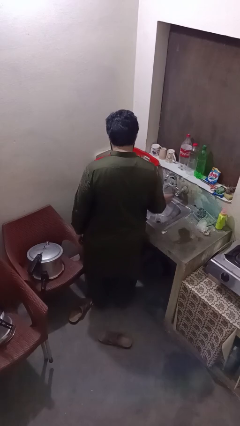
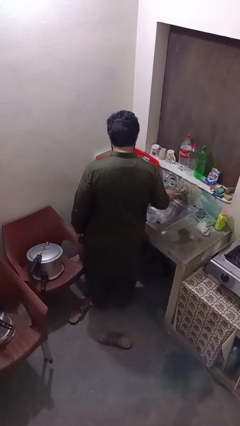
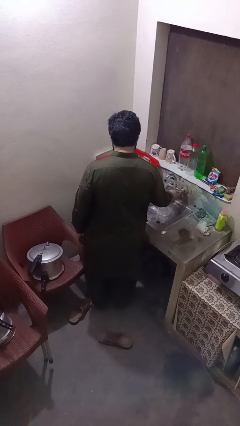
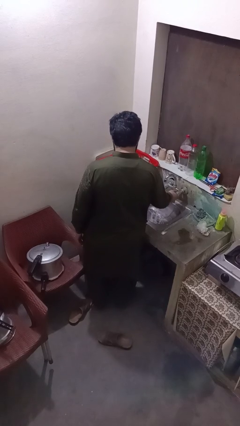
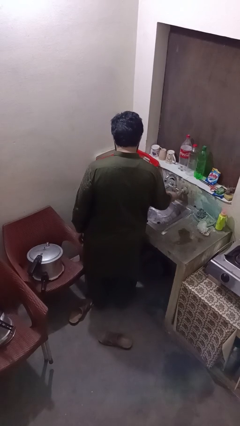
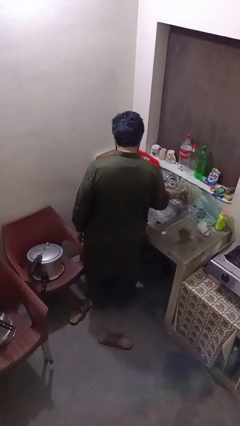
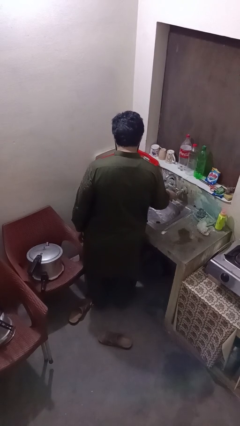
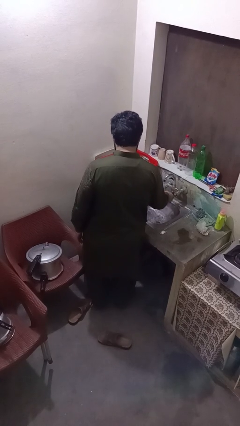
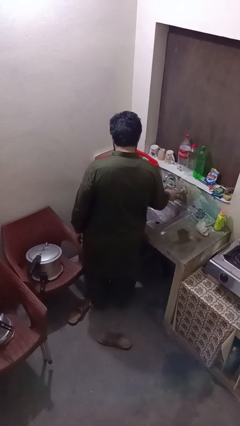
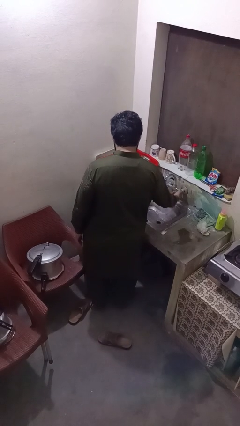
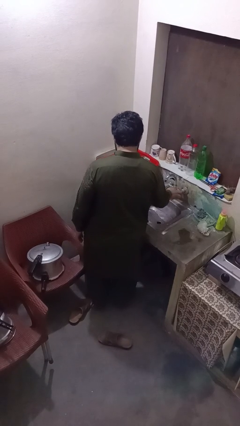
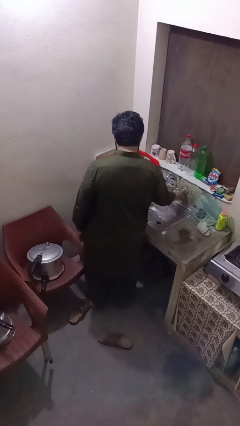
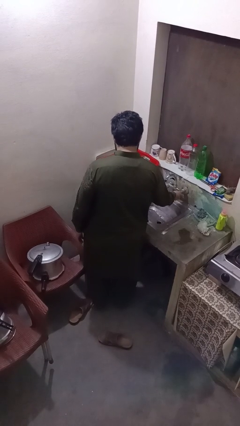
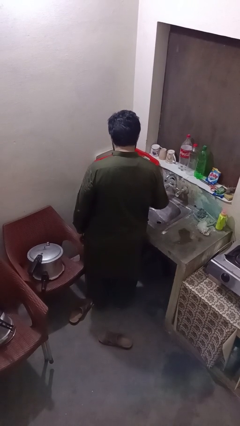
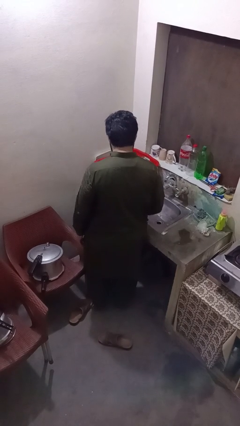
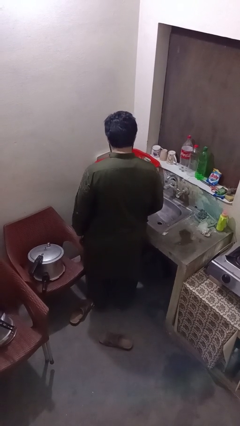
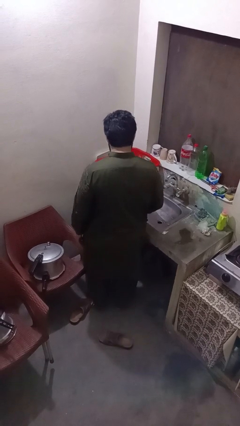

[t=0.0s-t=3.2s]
person turns off faucet

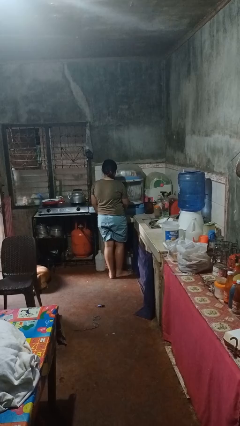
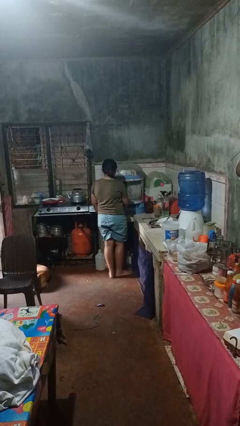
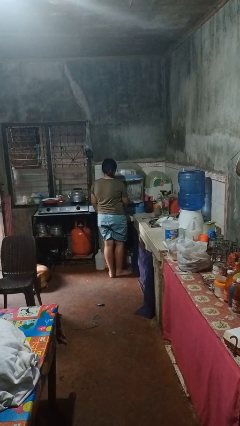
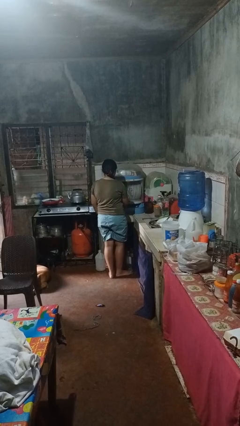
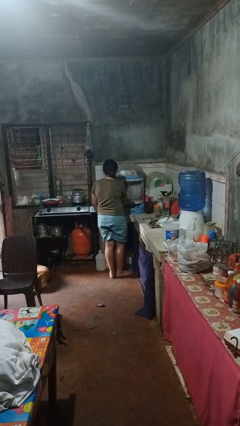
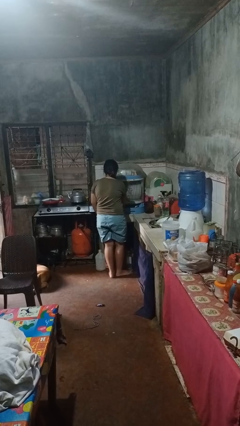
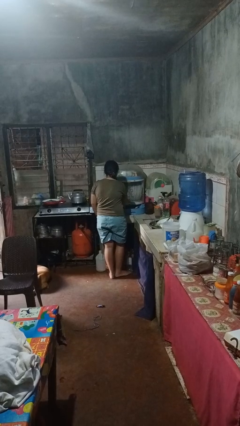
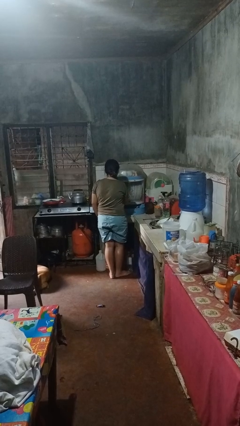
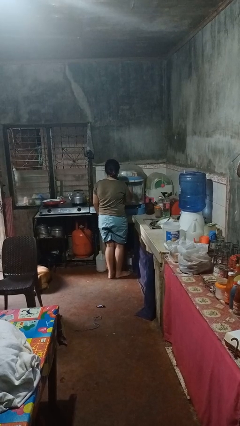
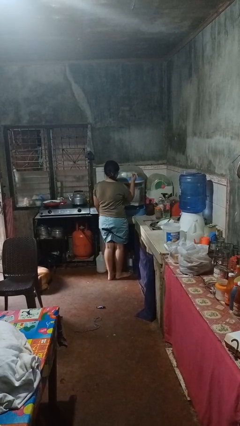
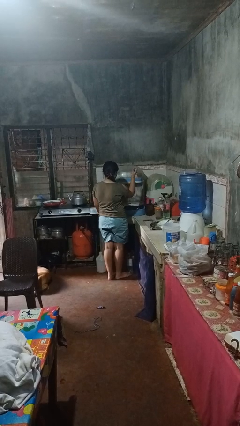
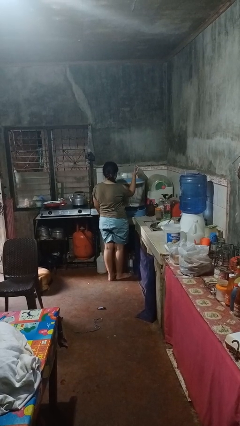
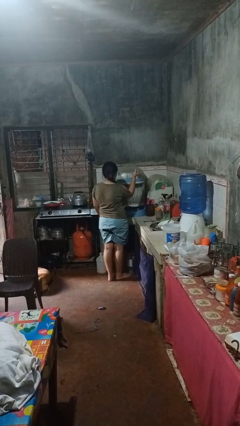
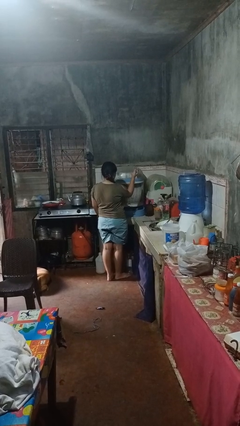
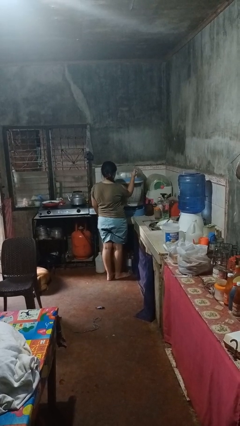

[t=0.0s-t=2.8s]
person takes object from kitchen drawer

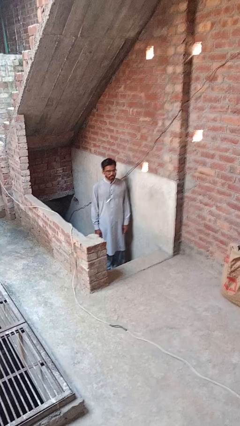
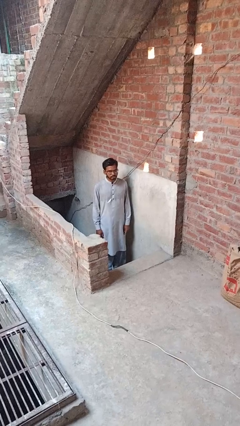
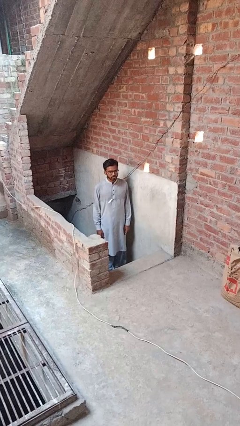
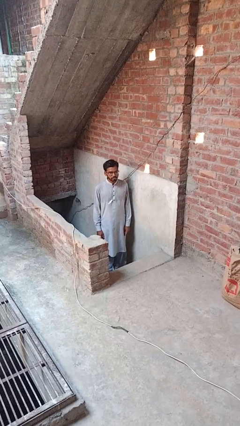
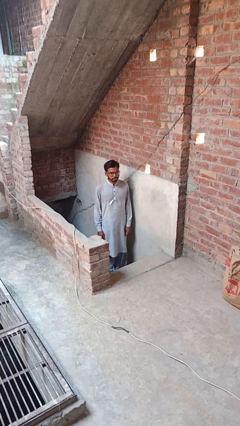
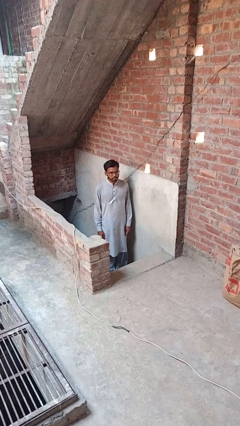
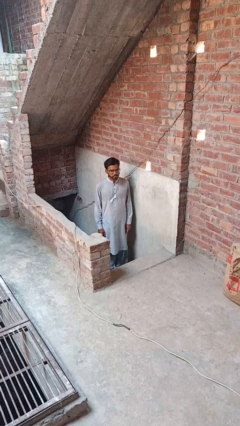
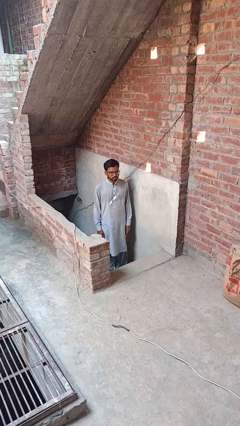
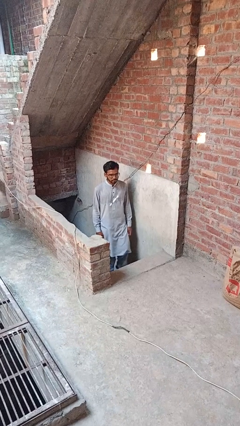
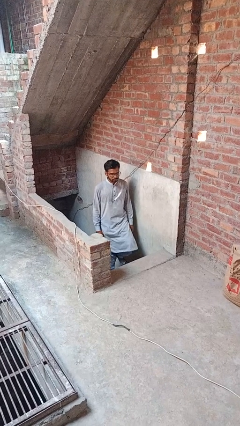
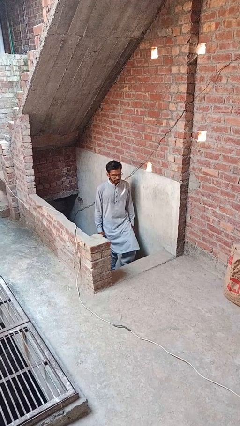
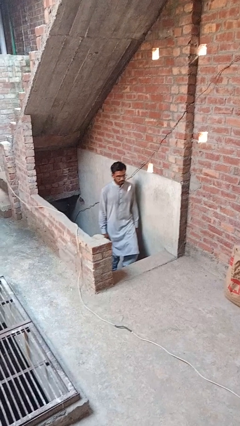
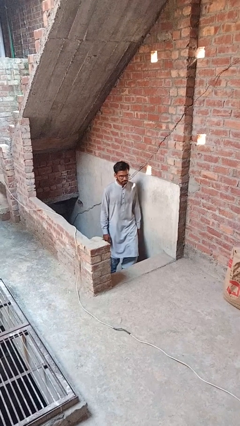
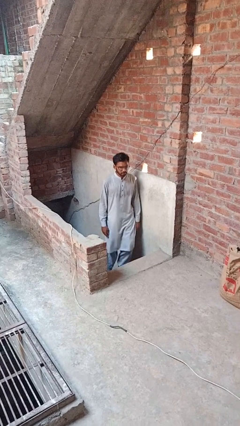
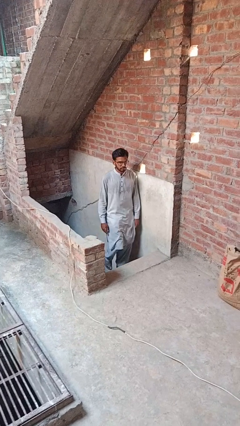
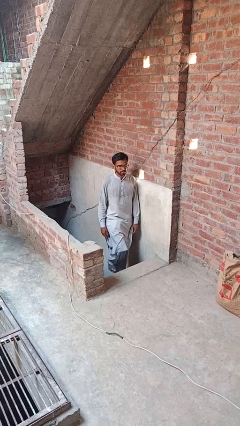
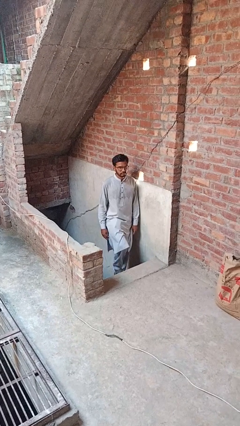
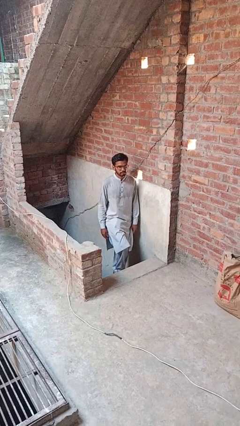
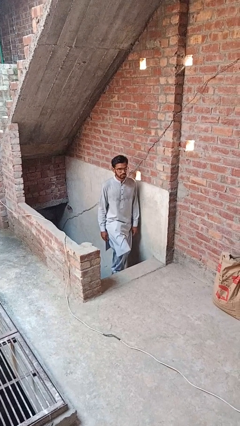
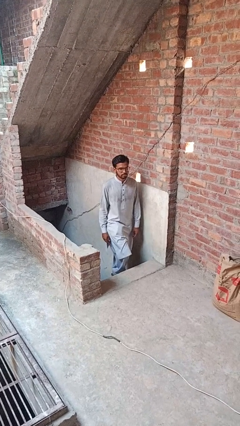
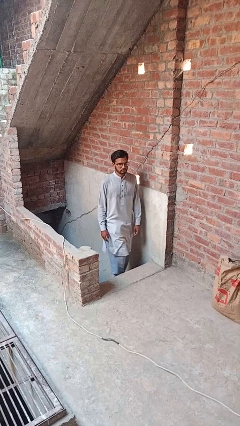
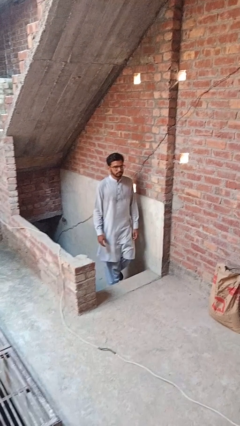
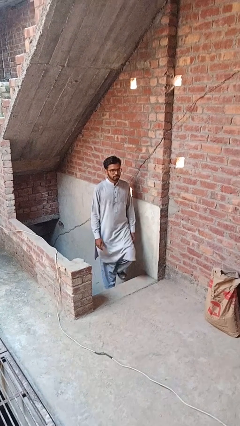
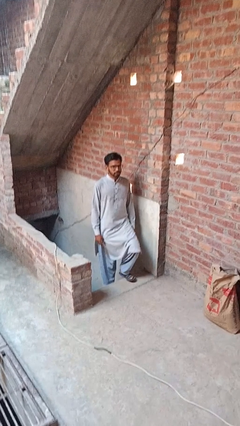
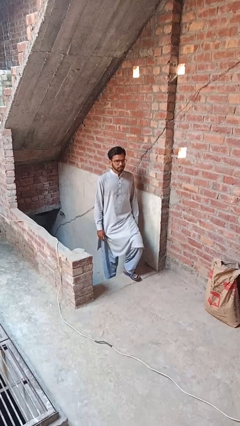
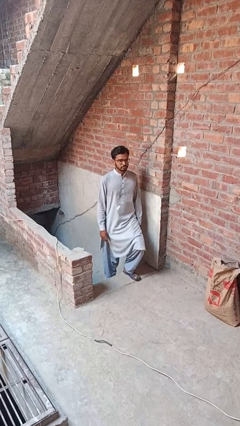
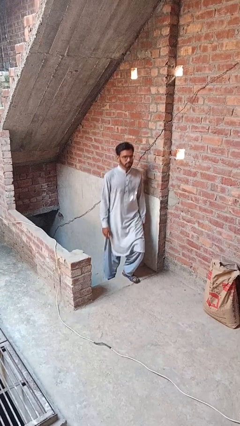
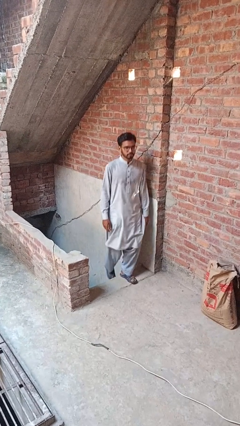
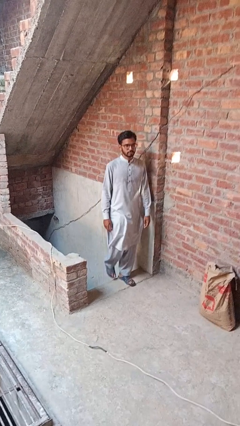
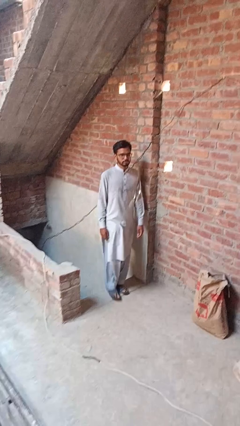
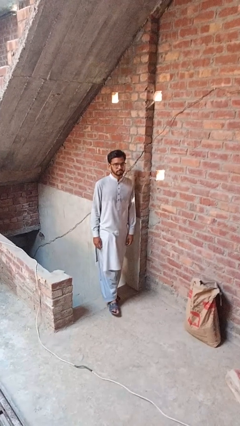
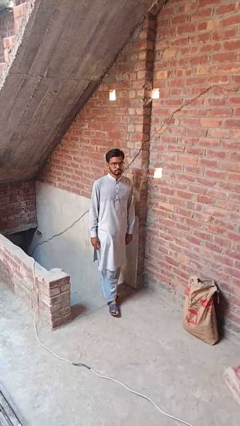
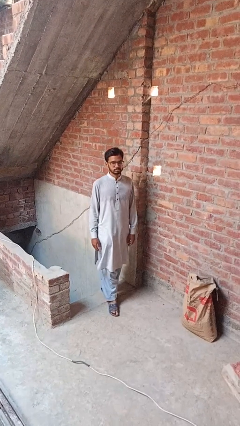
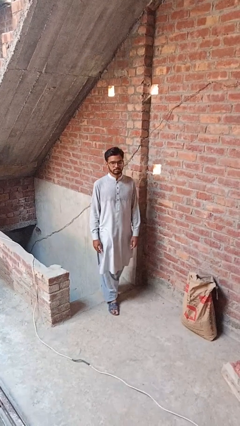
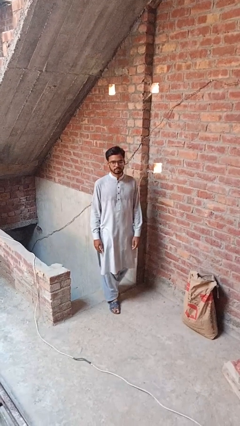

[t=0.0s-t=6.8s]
person climbs up stairs

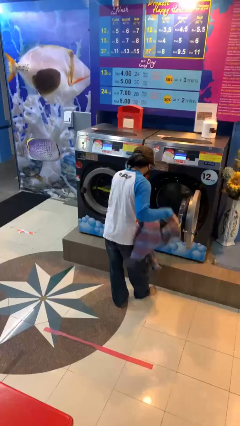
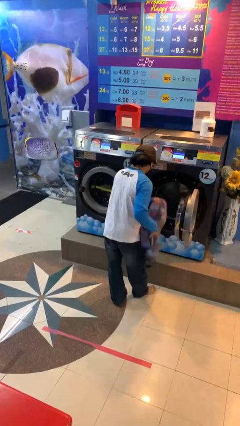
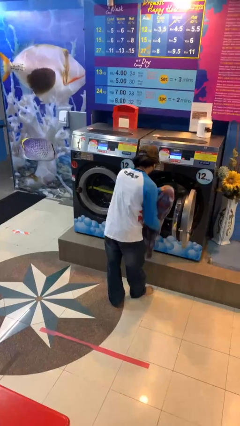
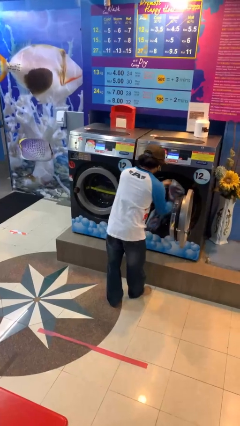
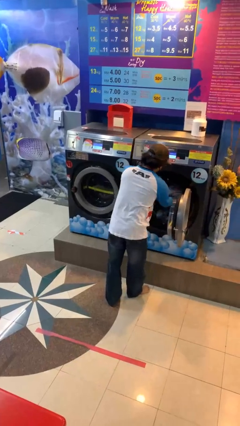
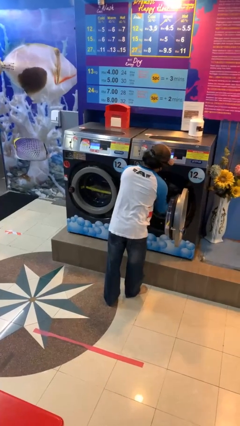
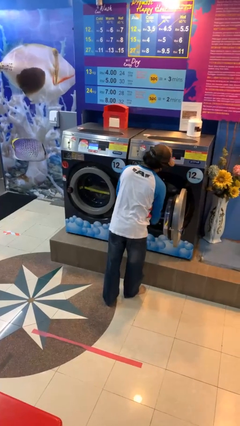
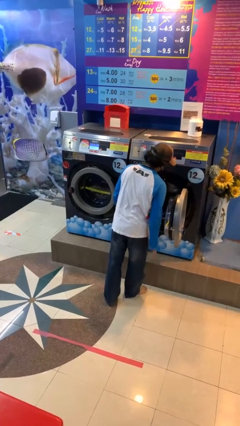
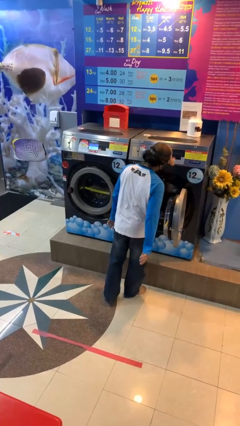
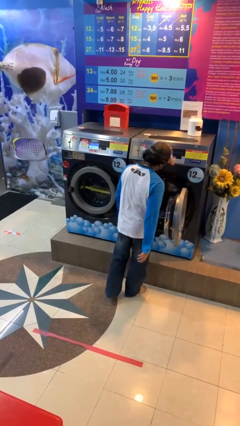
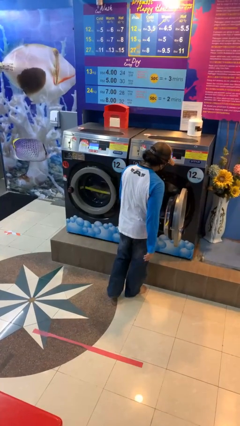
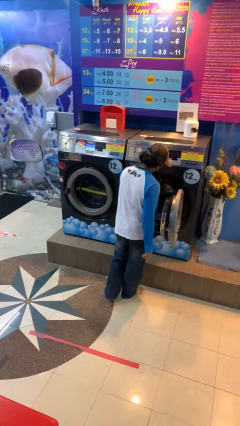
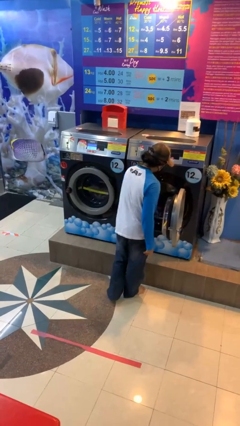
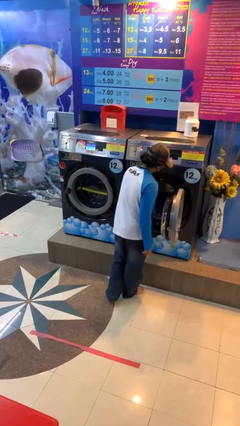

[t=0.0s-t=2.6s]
person loads clotheswasher

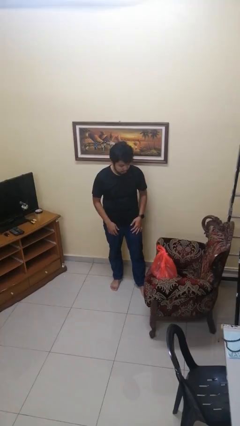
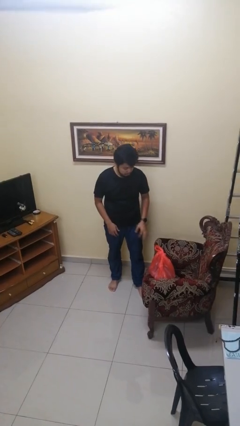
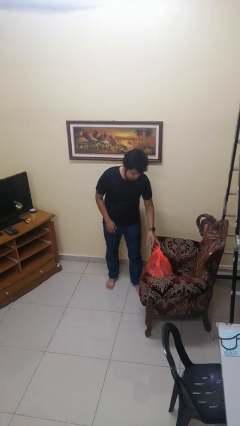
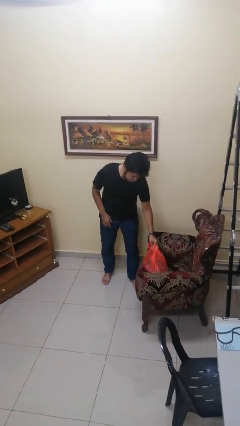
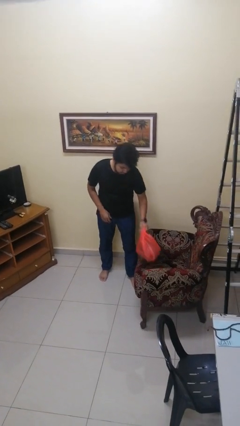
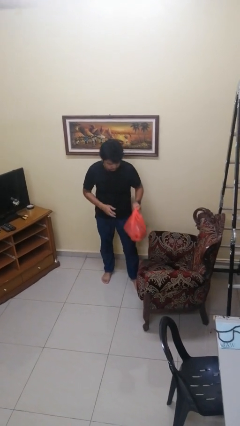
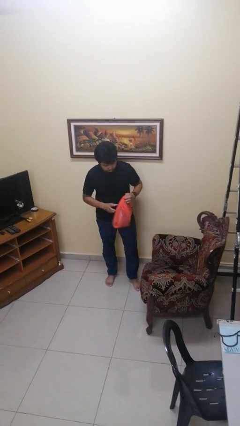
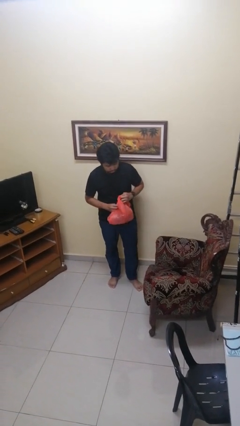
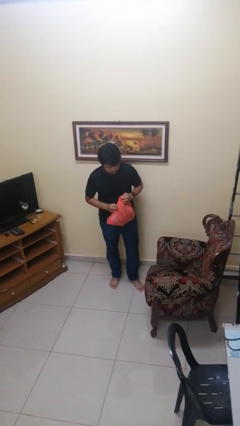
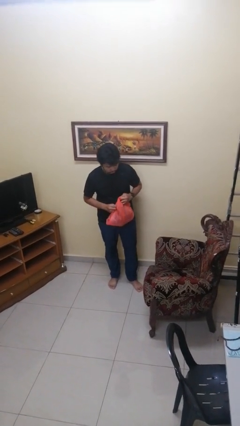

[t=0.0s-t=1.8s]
person picks up object from couch
